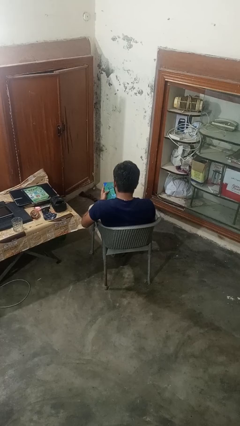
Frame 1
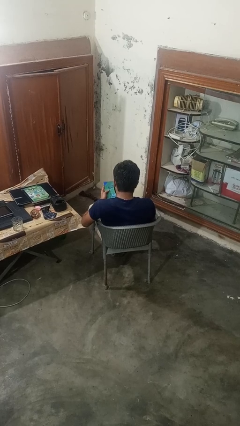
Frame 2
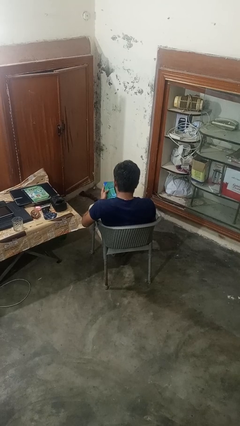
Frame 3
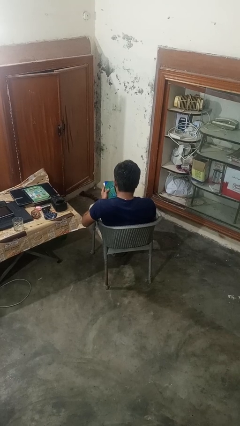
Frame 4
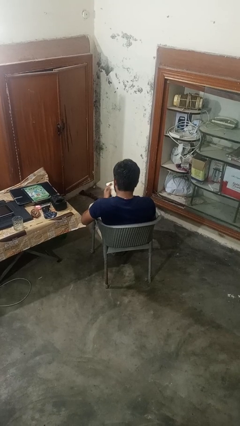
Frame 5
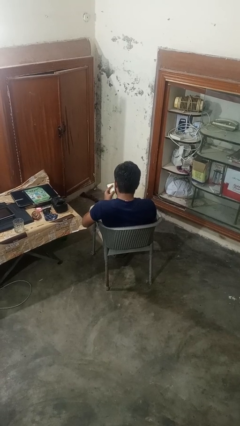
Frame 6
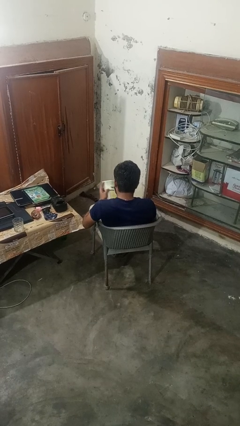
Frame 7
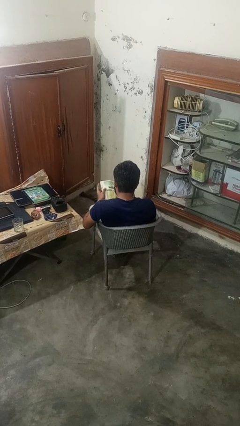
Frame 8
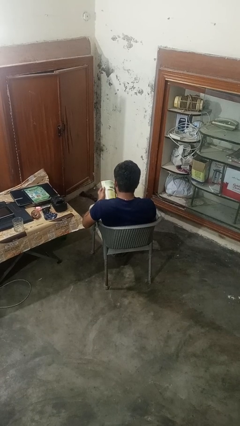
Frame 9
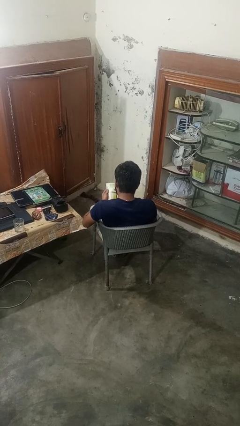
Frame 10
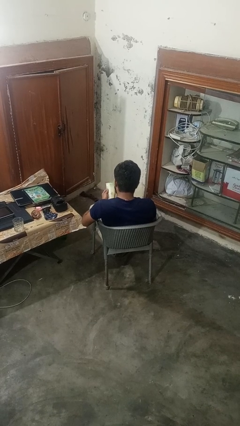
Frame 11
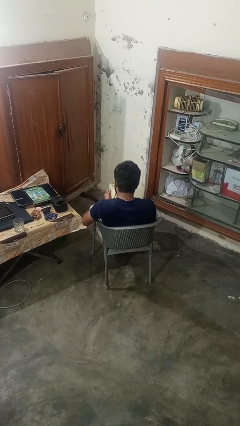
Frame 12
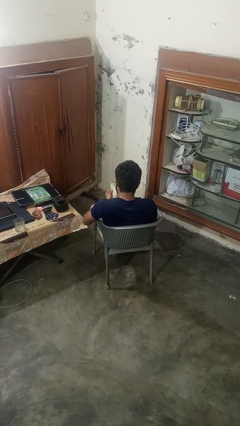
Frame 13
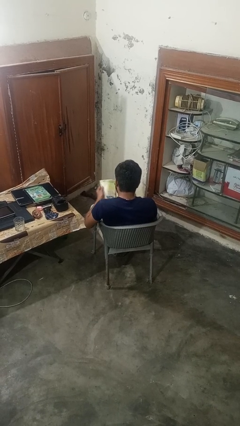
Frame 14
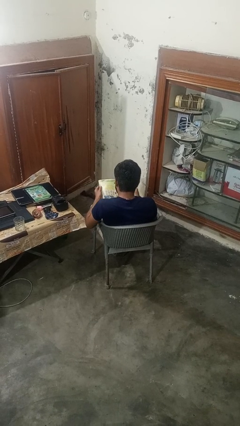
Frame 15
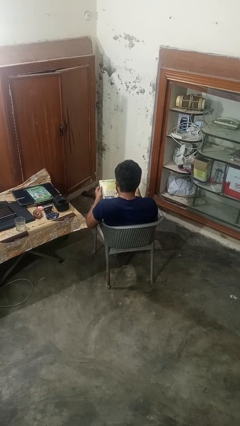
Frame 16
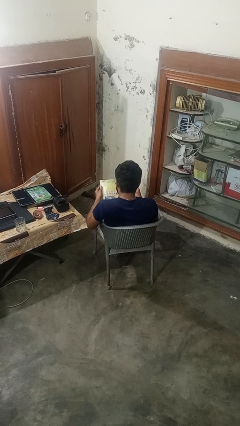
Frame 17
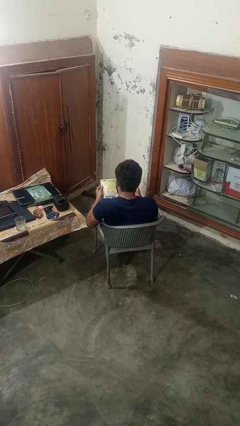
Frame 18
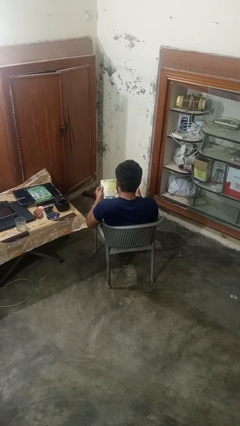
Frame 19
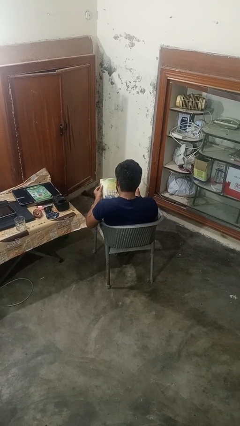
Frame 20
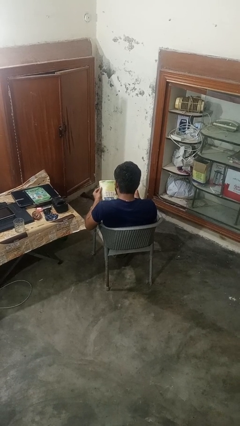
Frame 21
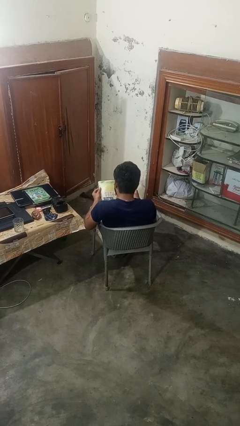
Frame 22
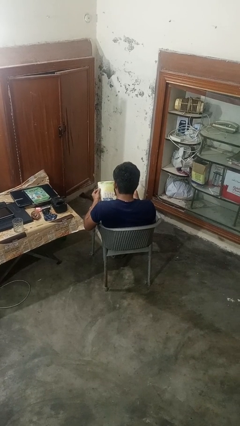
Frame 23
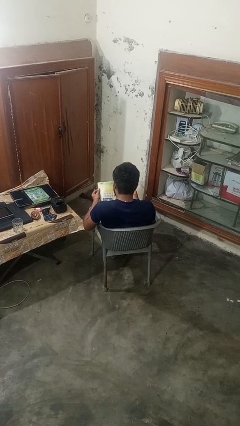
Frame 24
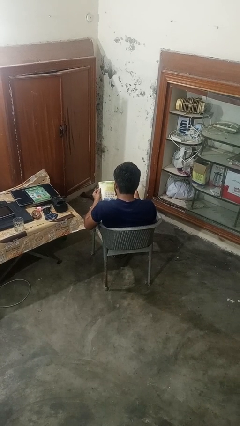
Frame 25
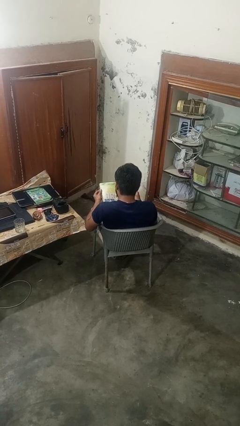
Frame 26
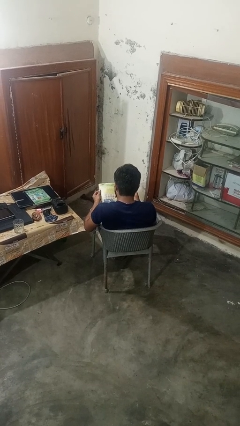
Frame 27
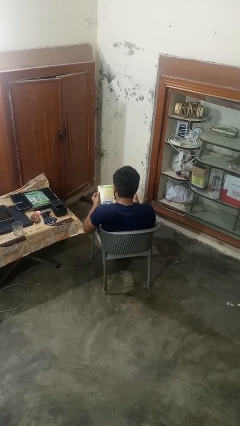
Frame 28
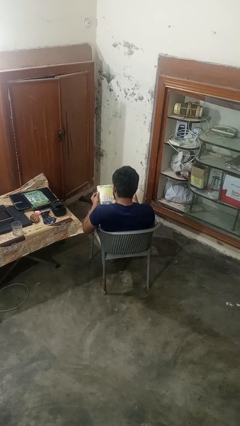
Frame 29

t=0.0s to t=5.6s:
person reads book

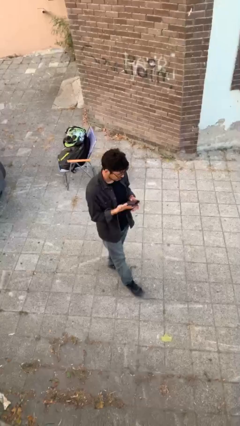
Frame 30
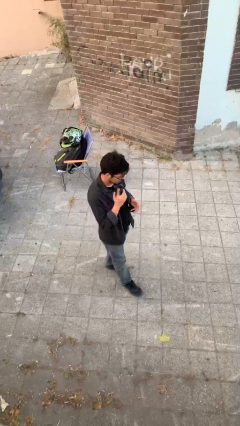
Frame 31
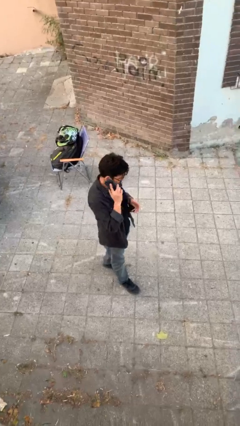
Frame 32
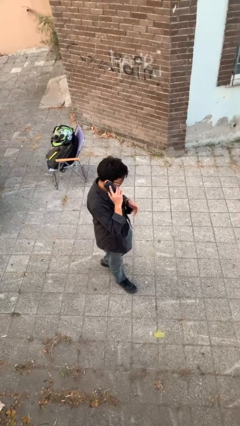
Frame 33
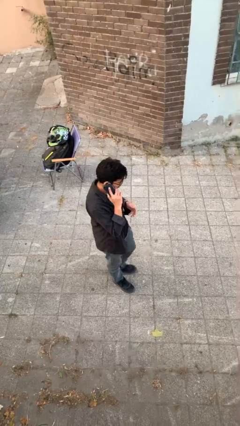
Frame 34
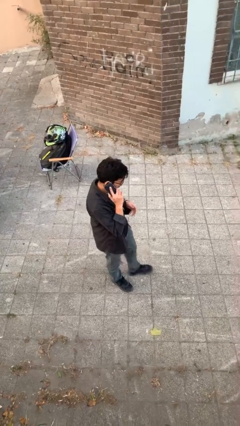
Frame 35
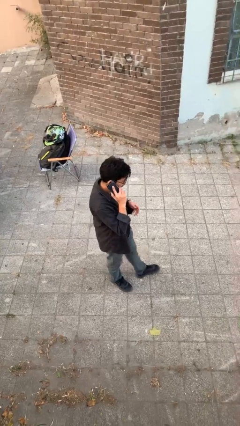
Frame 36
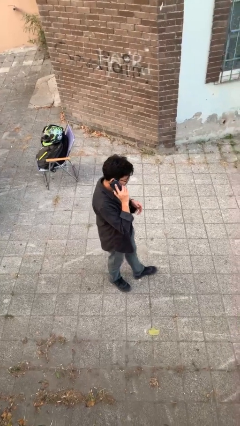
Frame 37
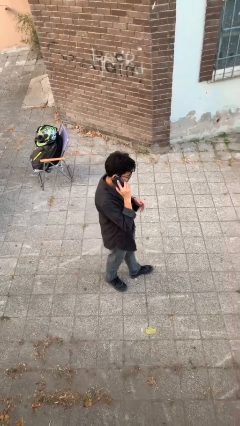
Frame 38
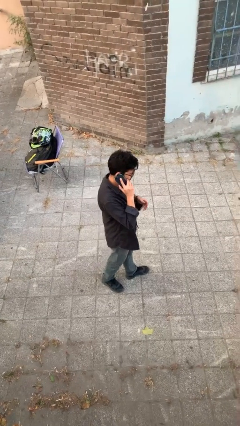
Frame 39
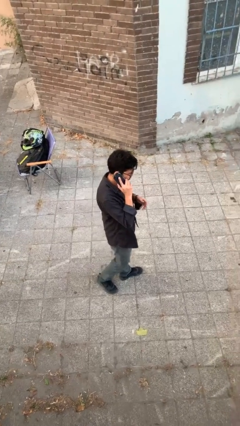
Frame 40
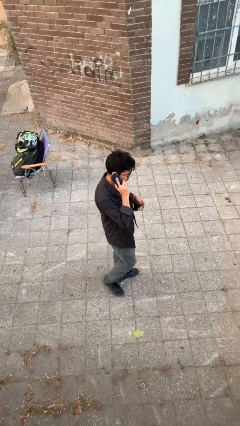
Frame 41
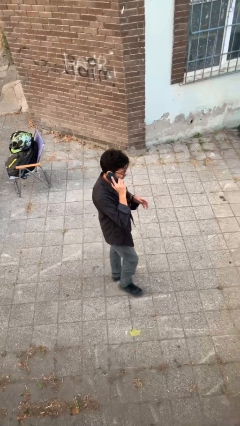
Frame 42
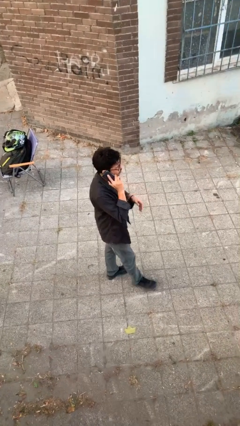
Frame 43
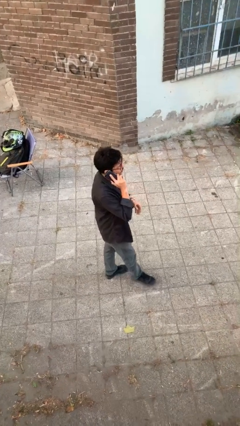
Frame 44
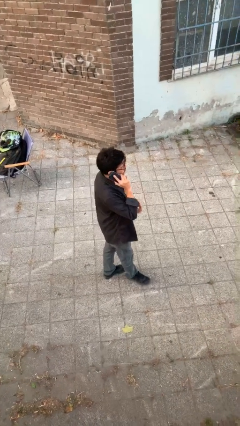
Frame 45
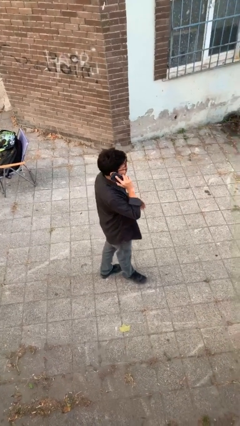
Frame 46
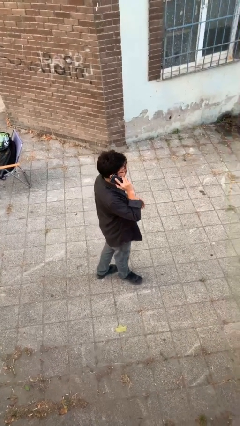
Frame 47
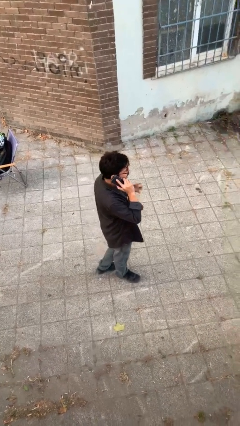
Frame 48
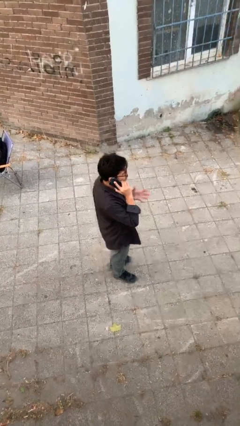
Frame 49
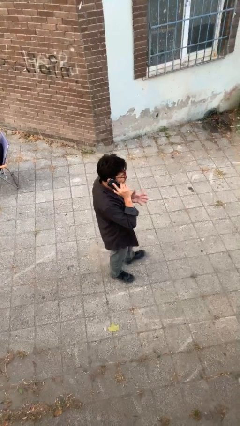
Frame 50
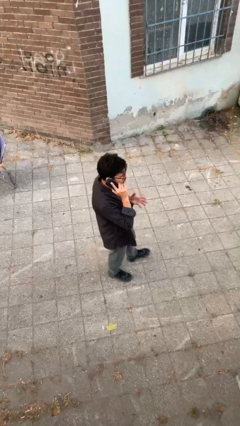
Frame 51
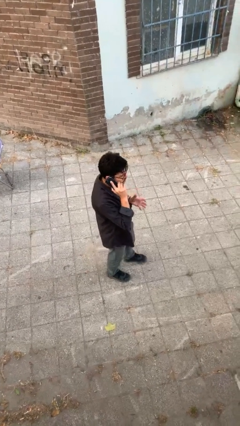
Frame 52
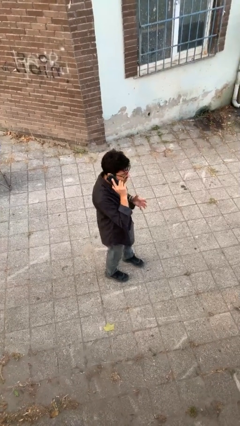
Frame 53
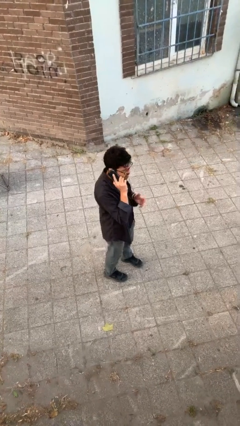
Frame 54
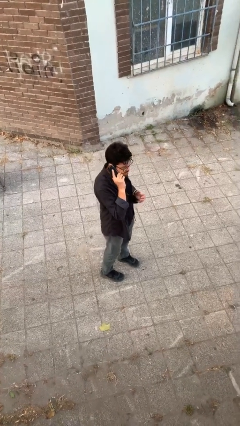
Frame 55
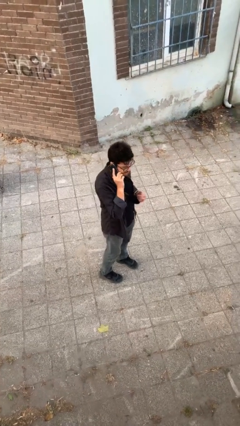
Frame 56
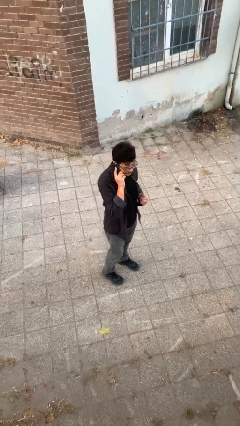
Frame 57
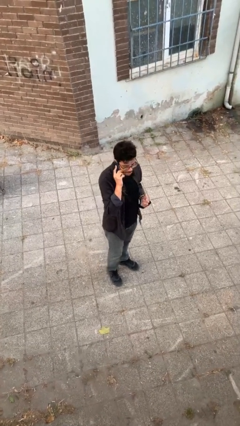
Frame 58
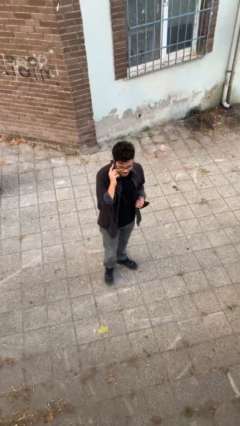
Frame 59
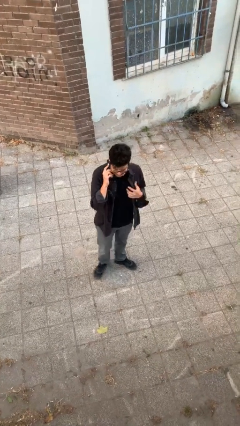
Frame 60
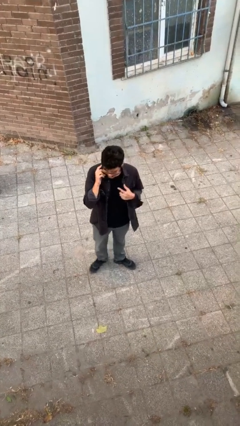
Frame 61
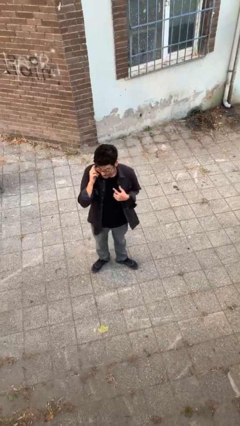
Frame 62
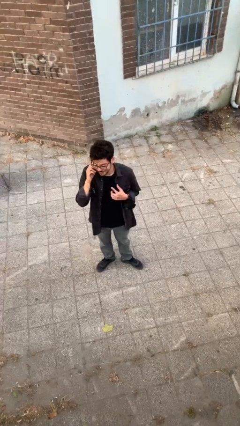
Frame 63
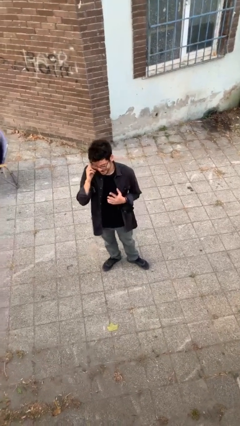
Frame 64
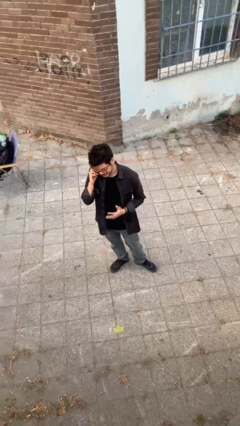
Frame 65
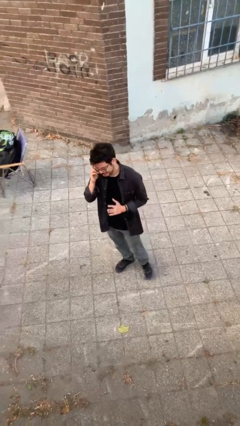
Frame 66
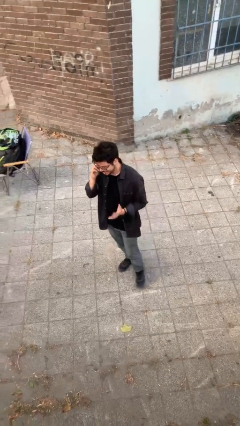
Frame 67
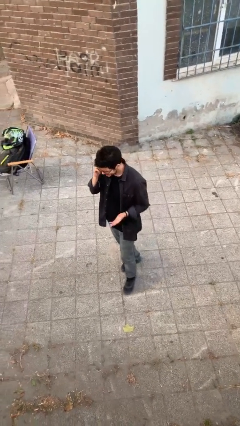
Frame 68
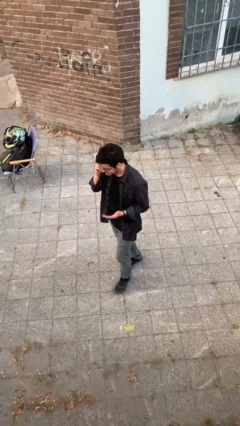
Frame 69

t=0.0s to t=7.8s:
person talks on phone

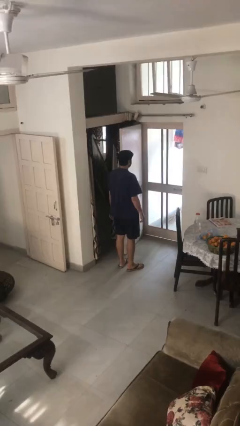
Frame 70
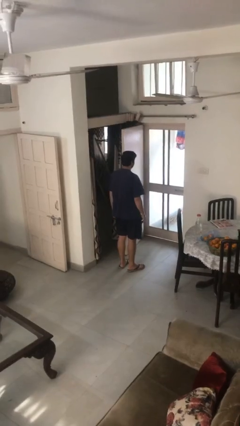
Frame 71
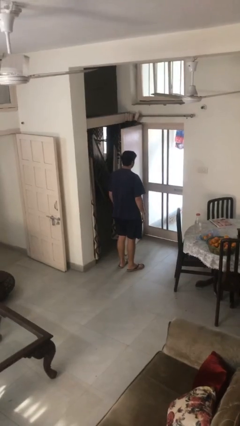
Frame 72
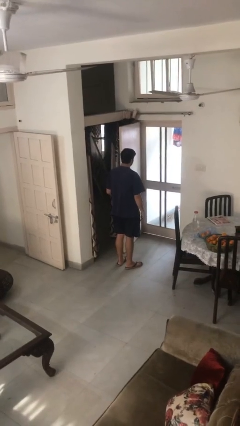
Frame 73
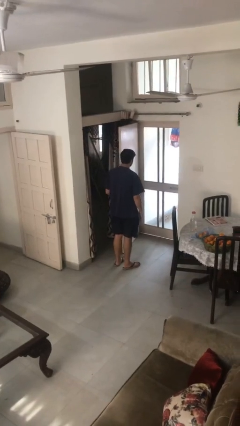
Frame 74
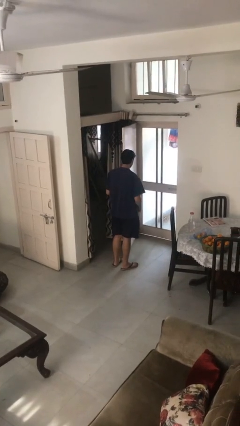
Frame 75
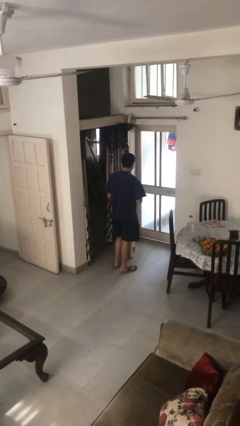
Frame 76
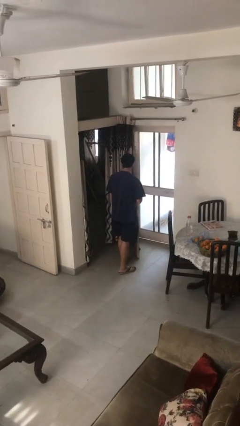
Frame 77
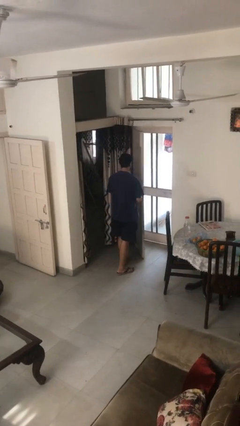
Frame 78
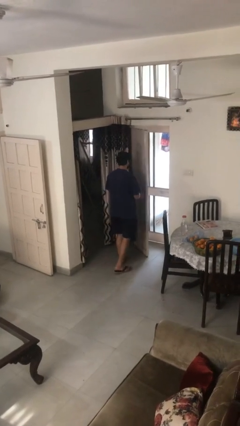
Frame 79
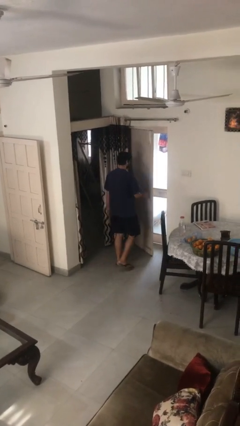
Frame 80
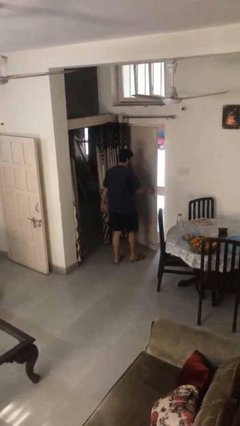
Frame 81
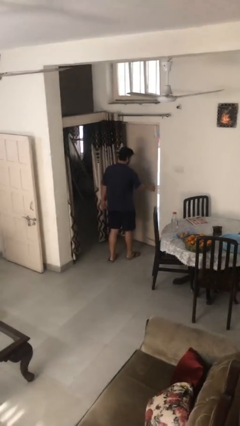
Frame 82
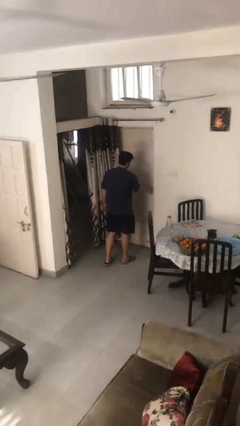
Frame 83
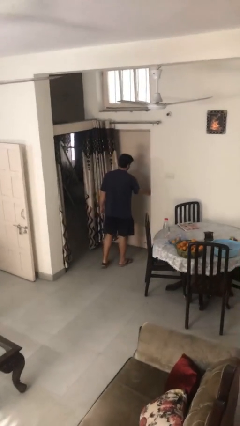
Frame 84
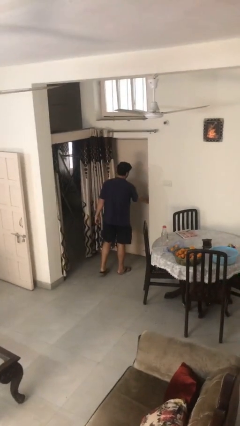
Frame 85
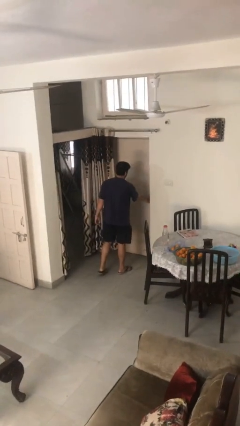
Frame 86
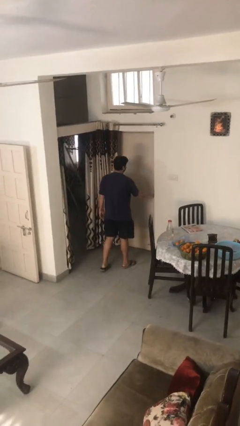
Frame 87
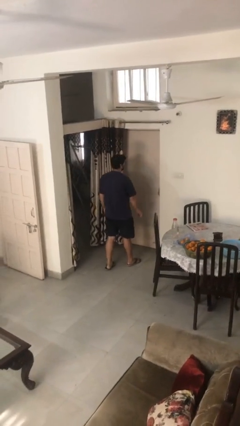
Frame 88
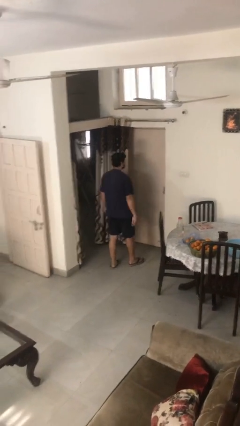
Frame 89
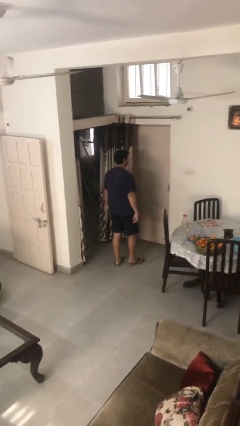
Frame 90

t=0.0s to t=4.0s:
person closes facility door

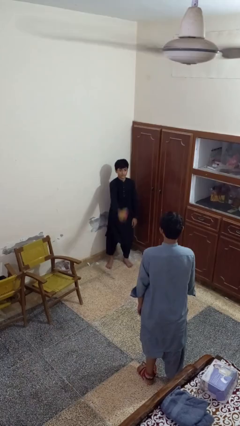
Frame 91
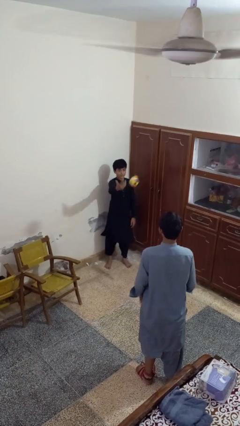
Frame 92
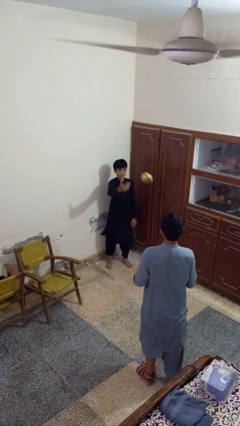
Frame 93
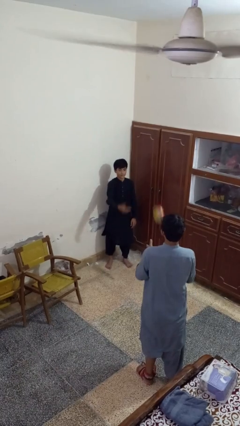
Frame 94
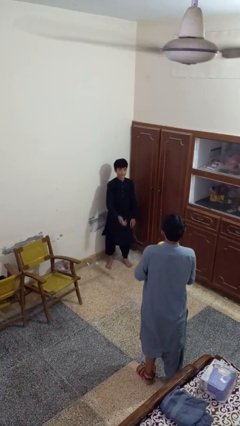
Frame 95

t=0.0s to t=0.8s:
person throws object to person
